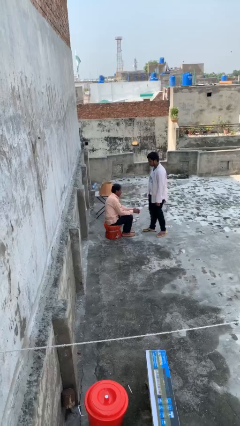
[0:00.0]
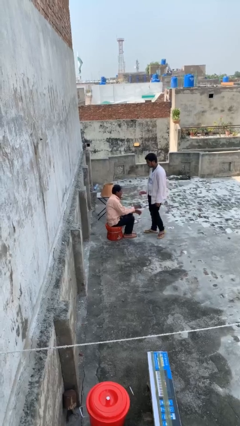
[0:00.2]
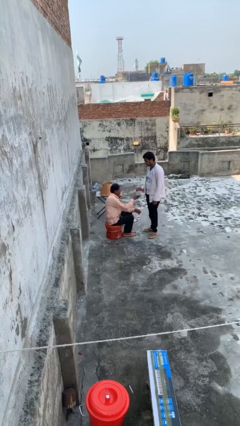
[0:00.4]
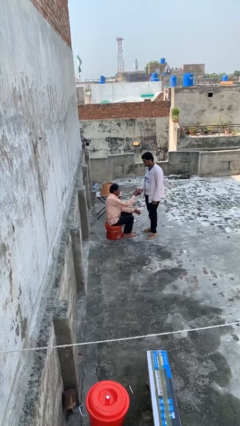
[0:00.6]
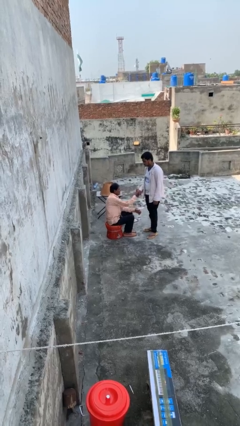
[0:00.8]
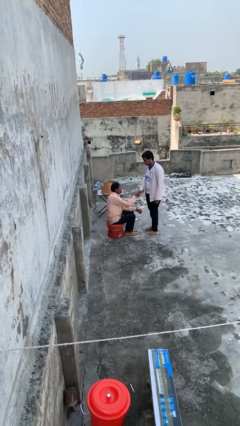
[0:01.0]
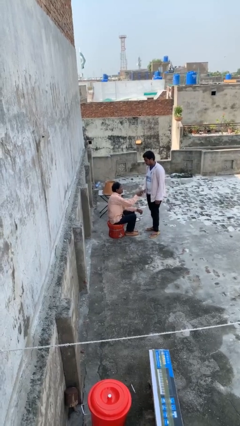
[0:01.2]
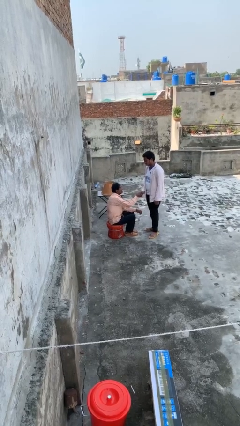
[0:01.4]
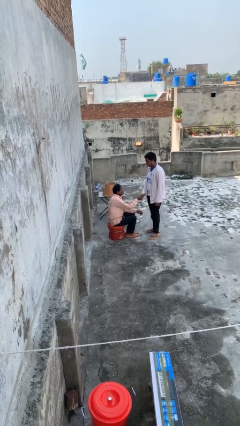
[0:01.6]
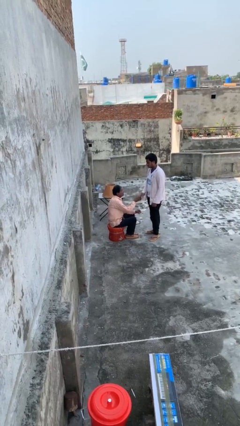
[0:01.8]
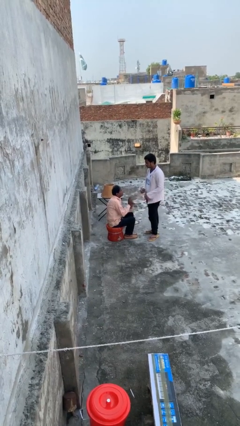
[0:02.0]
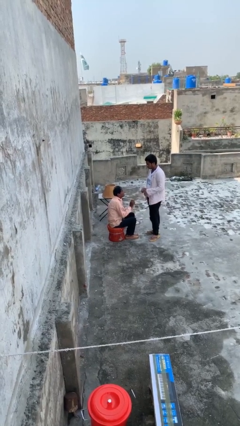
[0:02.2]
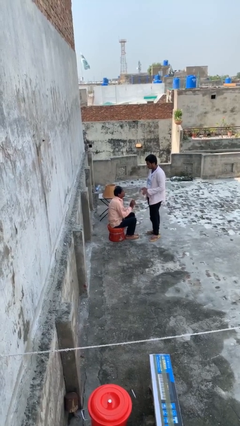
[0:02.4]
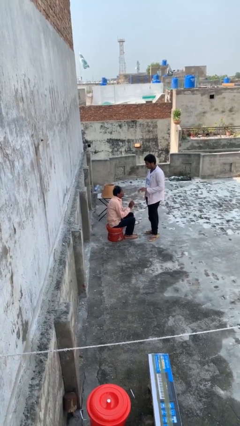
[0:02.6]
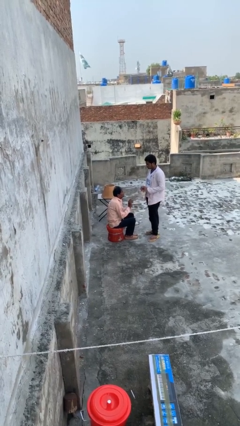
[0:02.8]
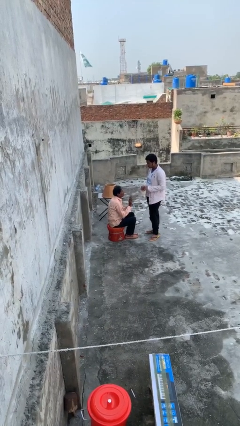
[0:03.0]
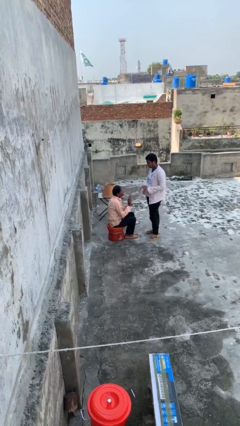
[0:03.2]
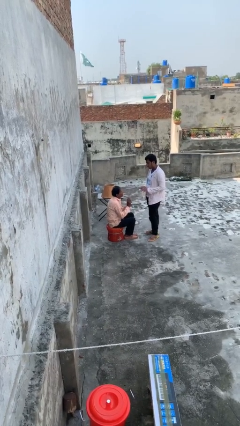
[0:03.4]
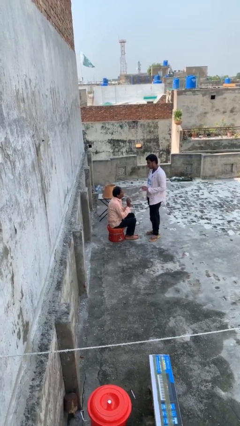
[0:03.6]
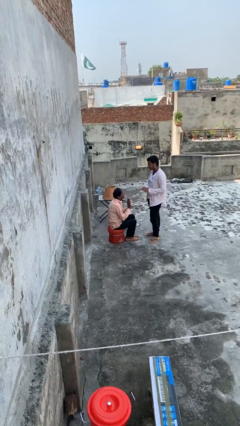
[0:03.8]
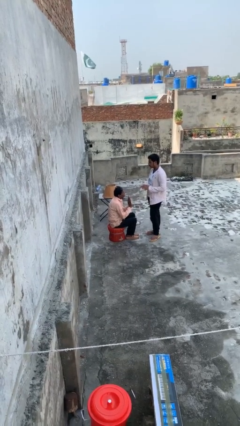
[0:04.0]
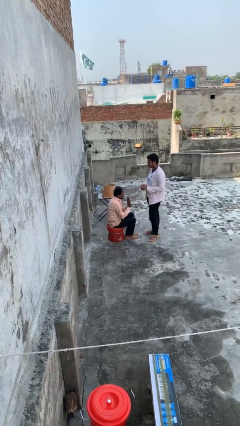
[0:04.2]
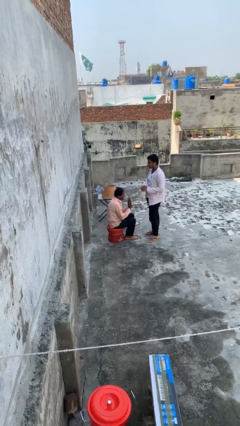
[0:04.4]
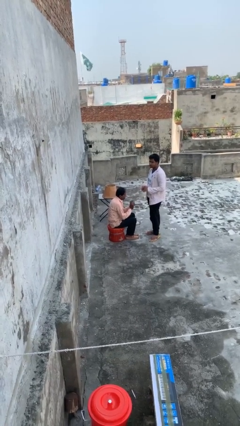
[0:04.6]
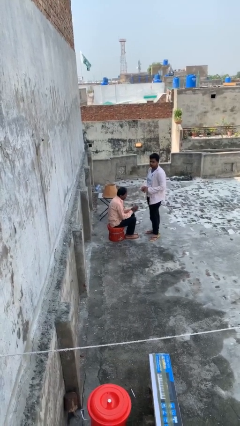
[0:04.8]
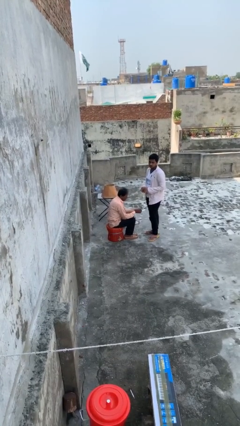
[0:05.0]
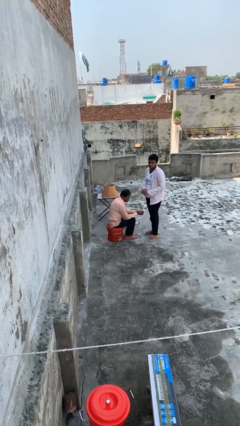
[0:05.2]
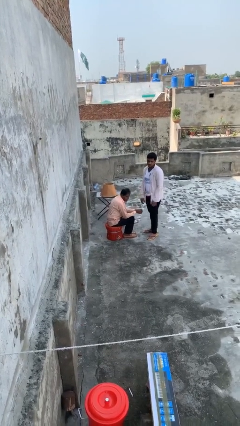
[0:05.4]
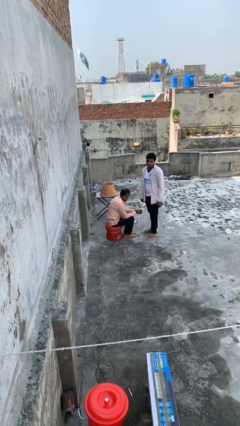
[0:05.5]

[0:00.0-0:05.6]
person shakes hand

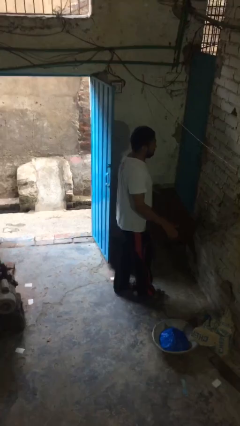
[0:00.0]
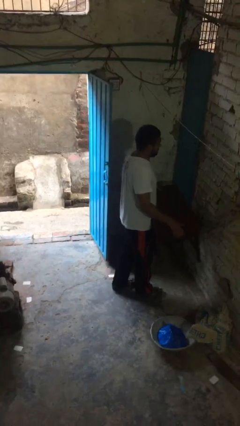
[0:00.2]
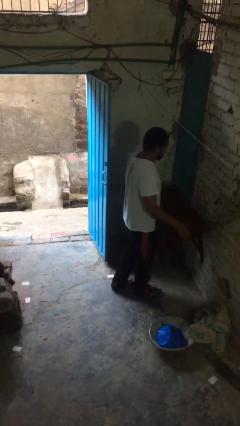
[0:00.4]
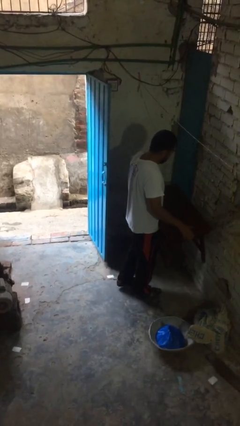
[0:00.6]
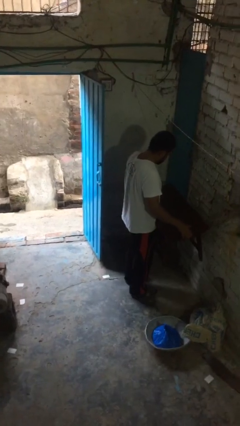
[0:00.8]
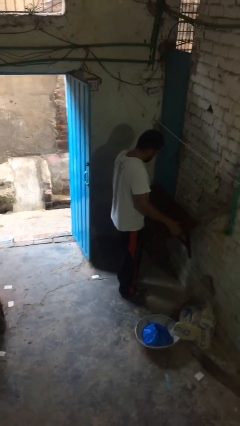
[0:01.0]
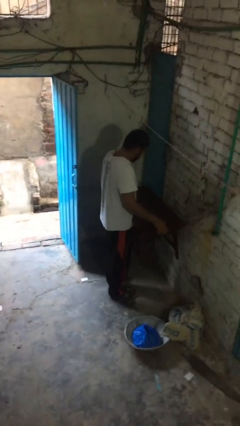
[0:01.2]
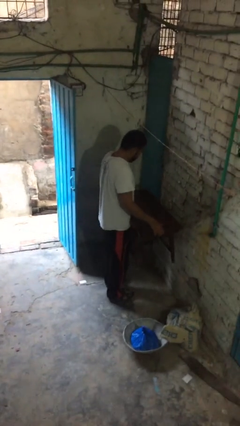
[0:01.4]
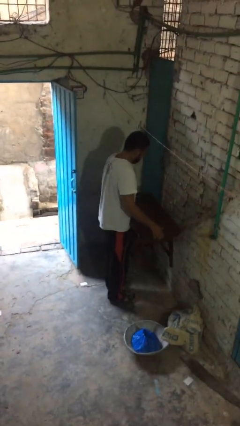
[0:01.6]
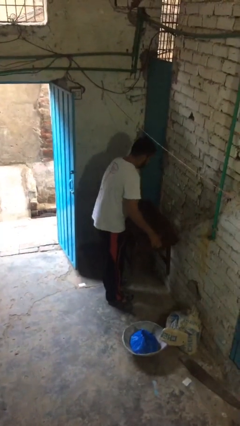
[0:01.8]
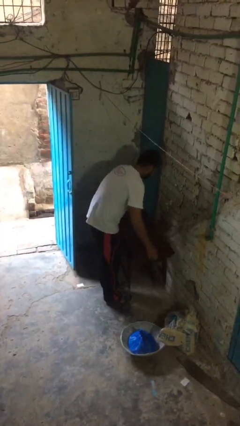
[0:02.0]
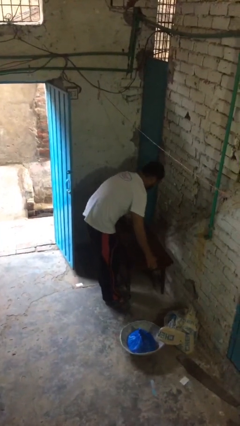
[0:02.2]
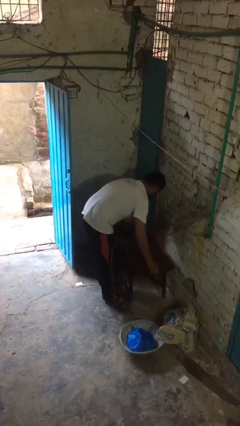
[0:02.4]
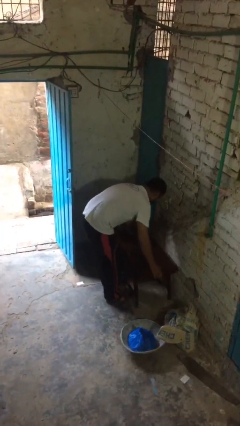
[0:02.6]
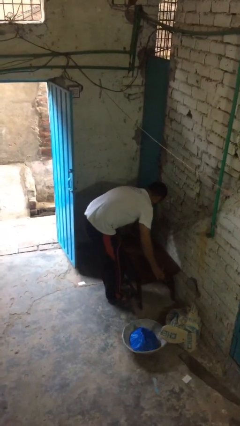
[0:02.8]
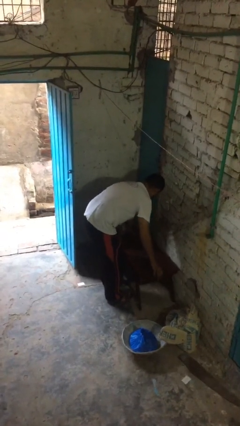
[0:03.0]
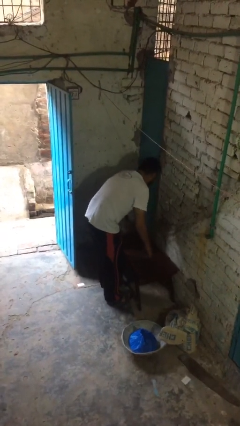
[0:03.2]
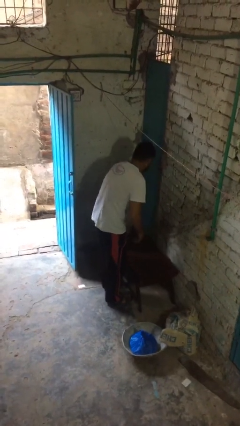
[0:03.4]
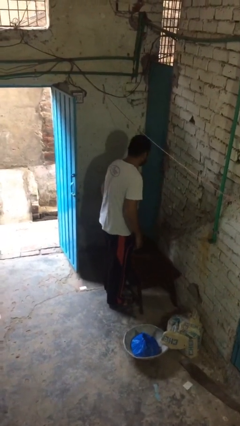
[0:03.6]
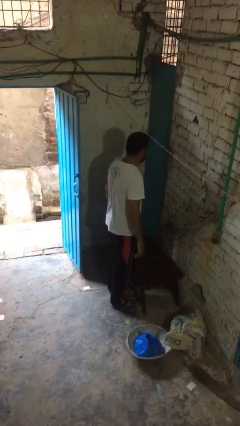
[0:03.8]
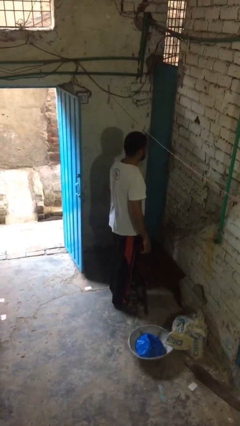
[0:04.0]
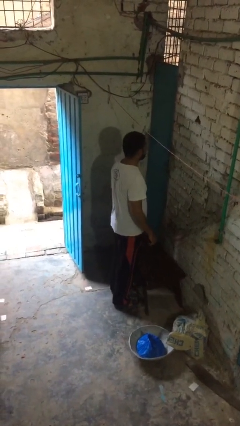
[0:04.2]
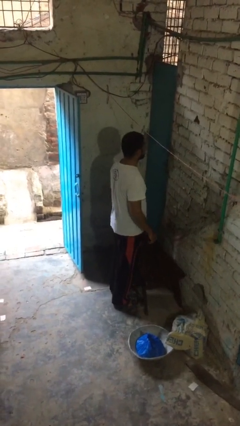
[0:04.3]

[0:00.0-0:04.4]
person puts down object on floor

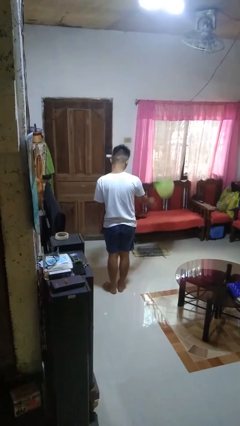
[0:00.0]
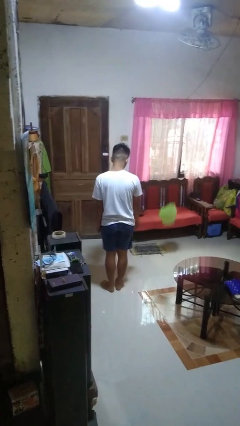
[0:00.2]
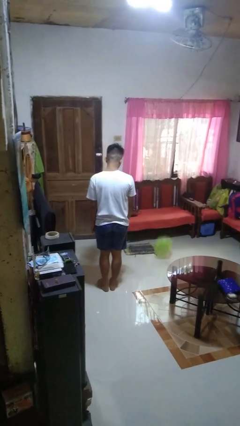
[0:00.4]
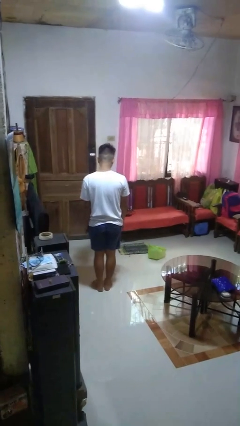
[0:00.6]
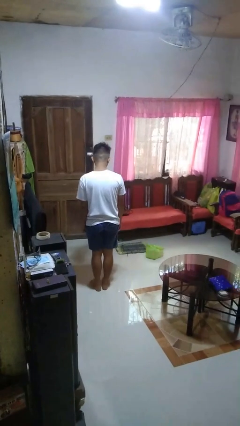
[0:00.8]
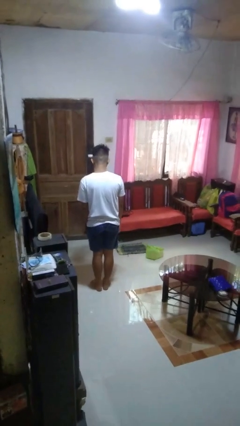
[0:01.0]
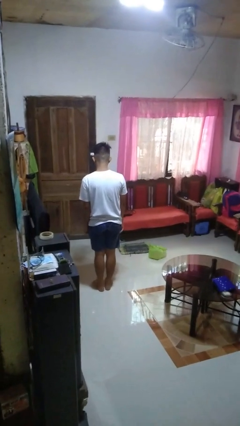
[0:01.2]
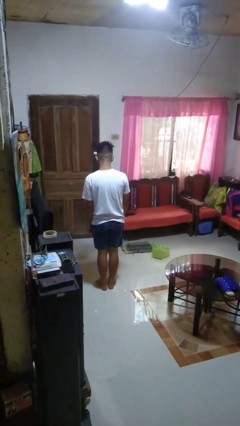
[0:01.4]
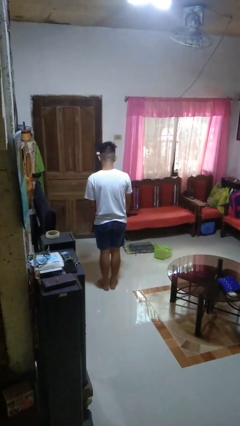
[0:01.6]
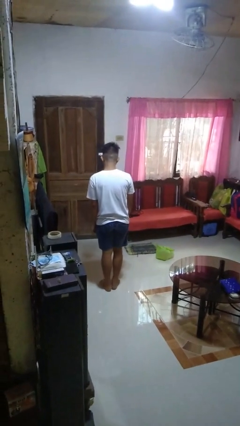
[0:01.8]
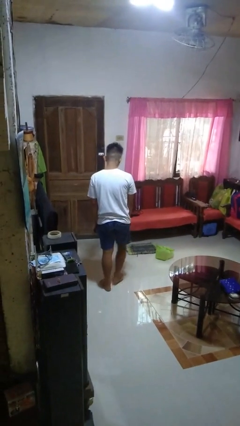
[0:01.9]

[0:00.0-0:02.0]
person throws object to ground

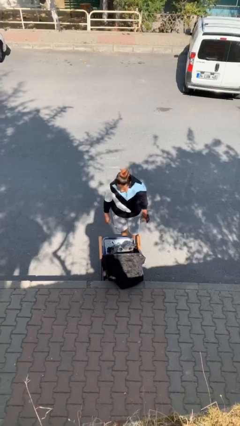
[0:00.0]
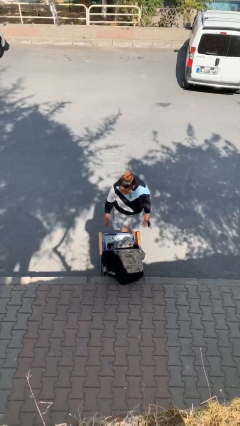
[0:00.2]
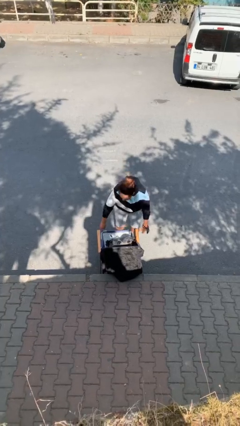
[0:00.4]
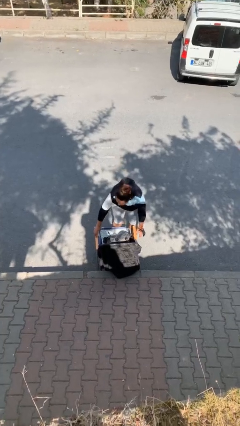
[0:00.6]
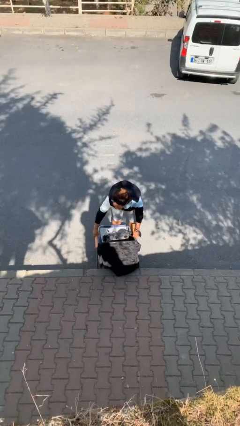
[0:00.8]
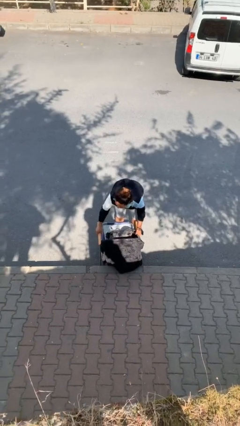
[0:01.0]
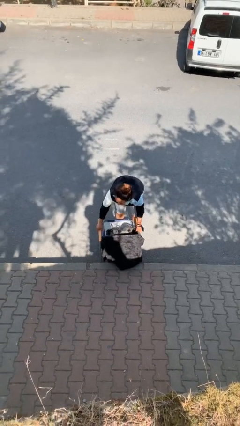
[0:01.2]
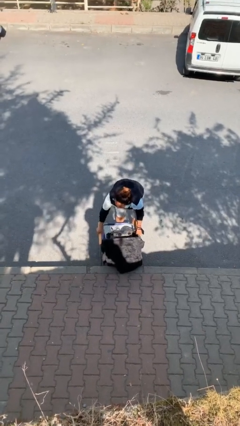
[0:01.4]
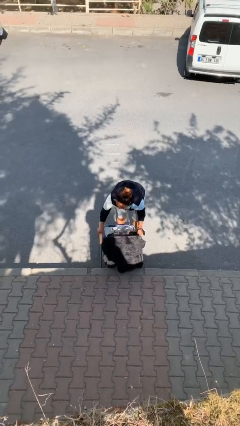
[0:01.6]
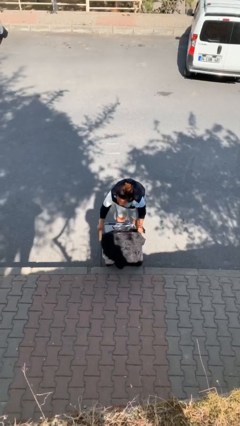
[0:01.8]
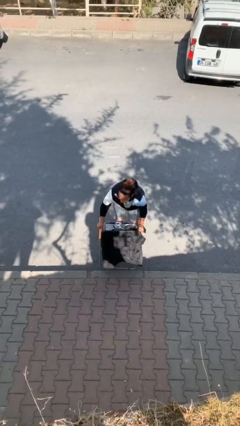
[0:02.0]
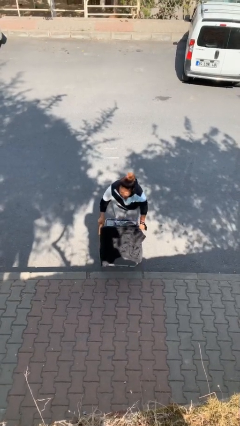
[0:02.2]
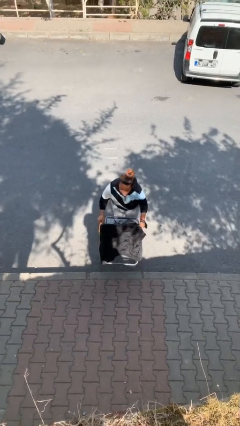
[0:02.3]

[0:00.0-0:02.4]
person picks up object from floor

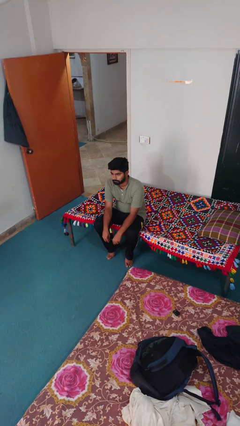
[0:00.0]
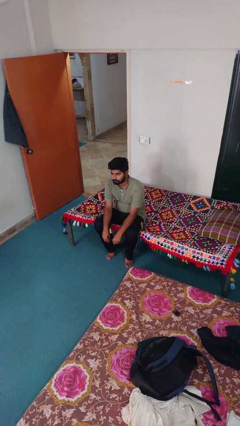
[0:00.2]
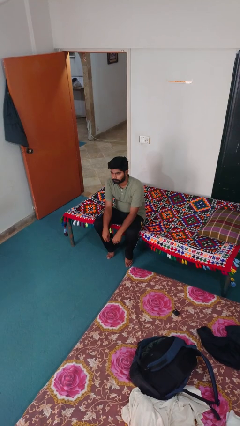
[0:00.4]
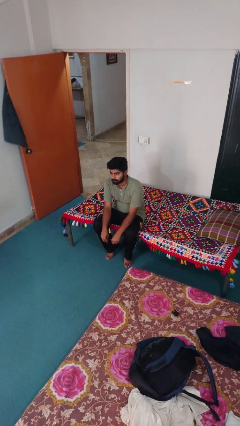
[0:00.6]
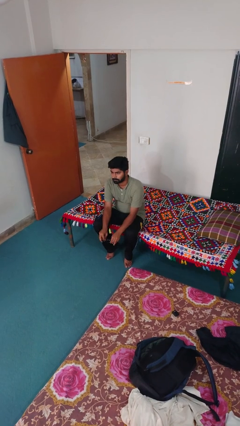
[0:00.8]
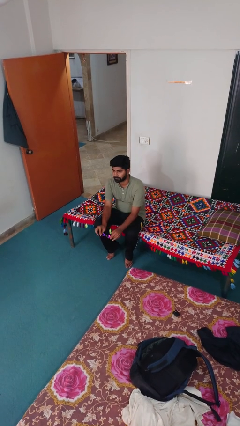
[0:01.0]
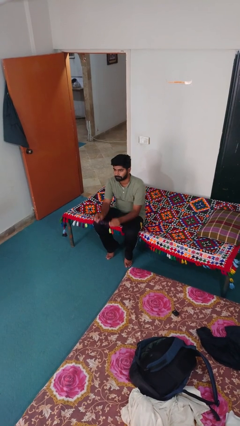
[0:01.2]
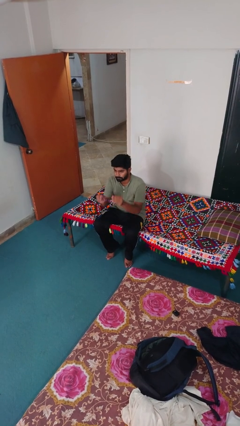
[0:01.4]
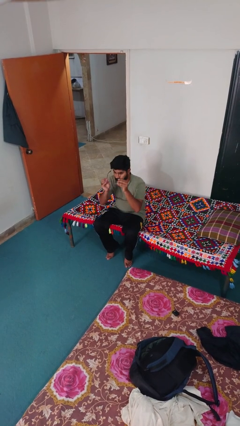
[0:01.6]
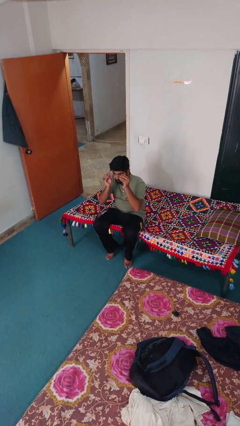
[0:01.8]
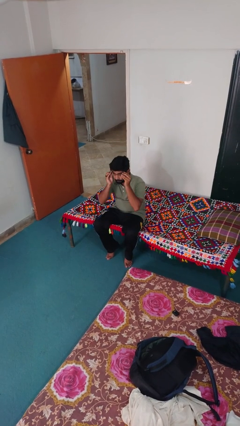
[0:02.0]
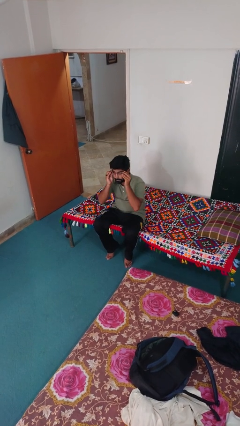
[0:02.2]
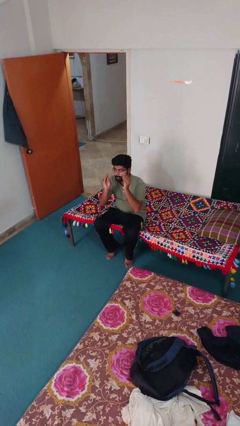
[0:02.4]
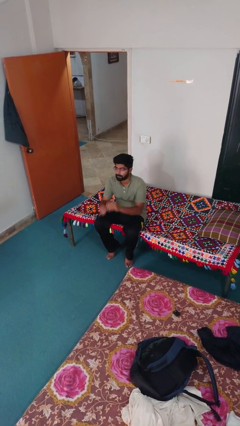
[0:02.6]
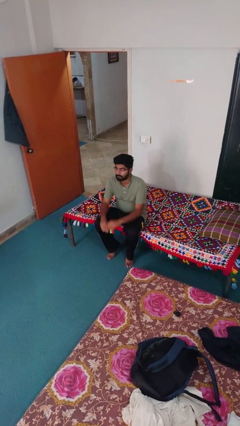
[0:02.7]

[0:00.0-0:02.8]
person puts on glasses

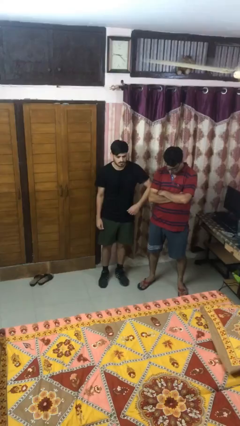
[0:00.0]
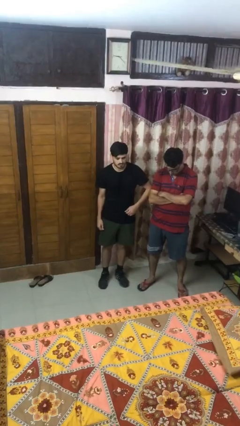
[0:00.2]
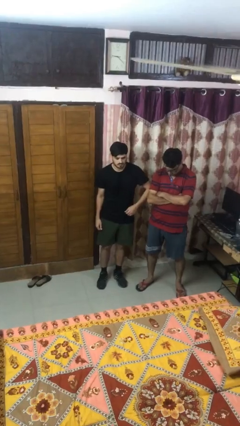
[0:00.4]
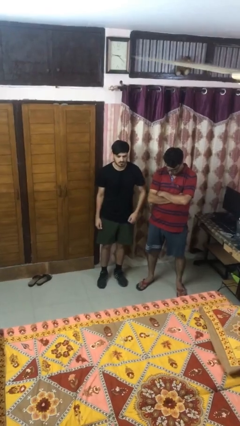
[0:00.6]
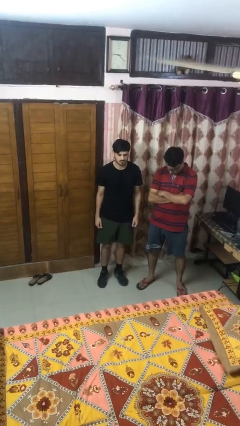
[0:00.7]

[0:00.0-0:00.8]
person nudges person with elbow
